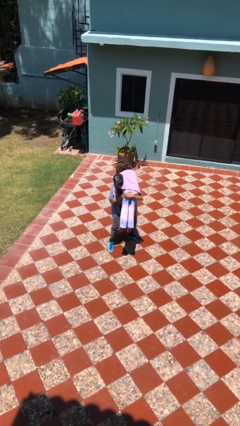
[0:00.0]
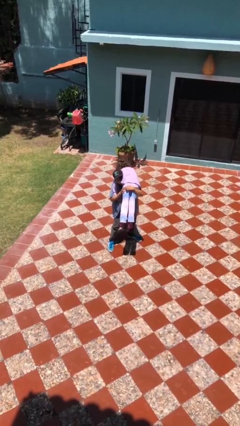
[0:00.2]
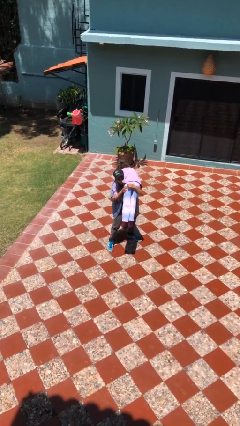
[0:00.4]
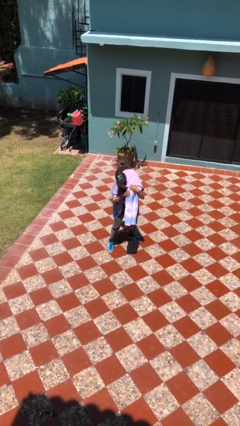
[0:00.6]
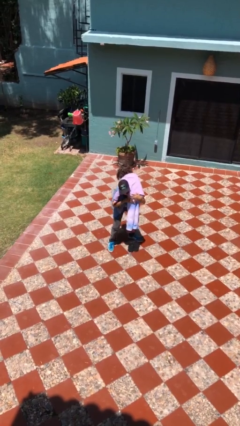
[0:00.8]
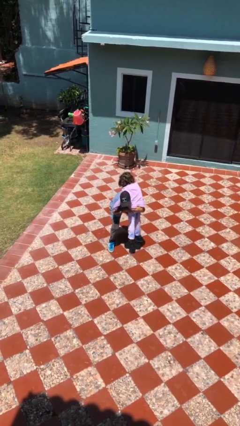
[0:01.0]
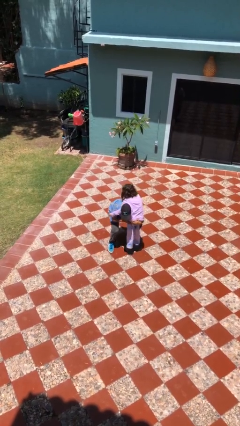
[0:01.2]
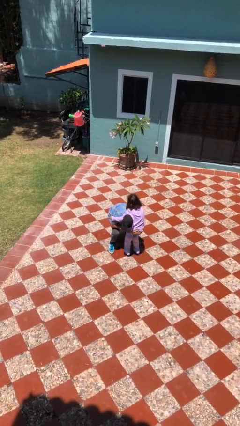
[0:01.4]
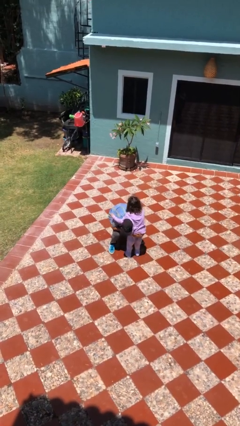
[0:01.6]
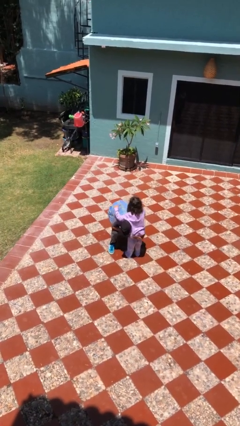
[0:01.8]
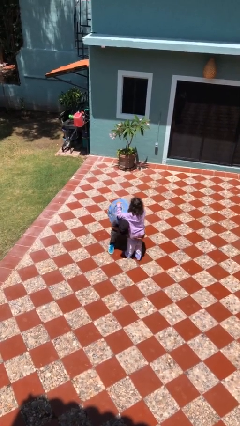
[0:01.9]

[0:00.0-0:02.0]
person puts down person

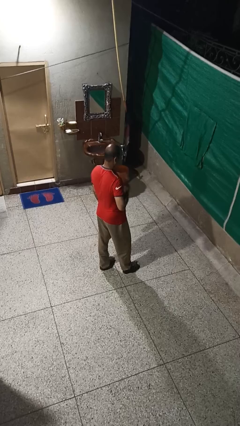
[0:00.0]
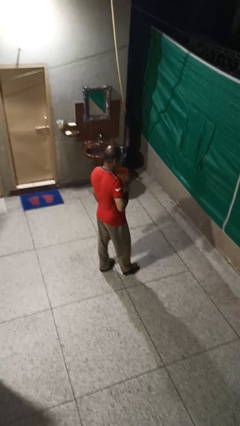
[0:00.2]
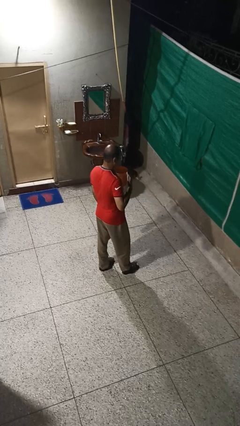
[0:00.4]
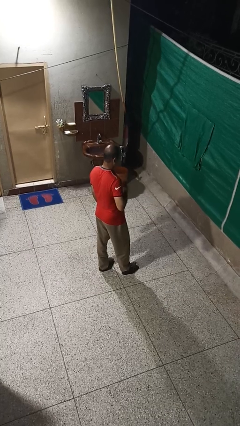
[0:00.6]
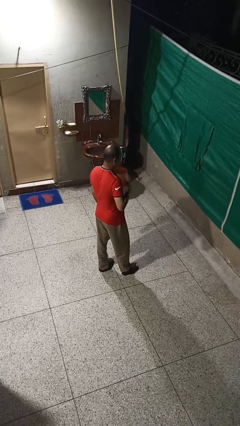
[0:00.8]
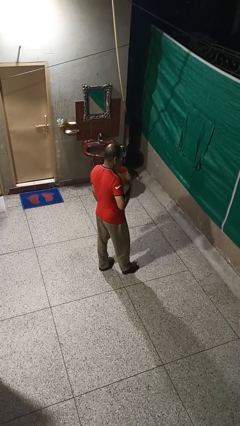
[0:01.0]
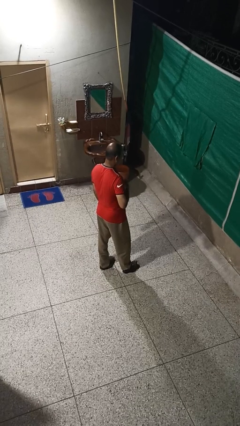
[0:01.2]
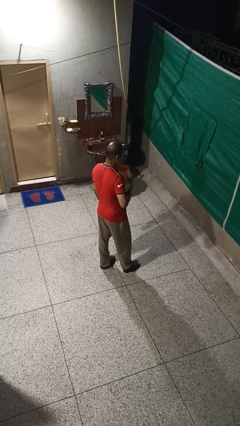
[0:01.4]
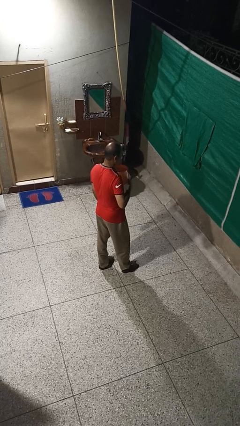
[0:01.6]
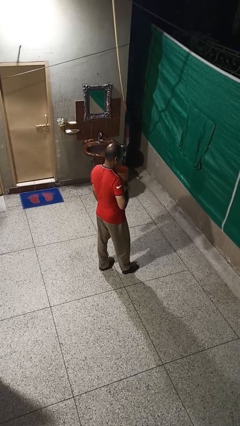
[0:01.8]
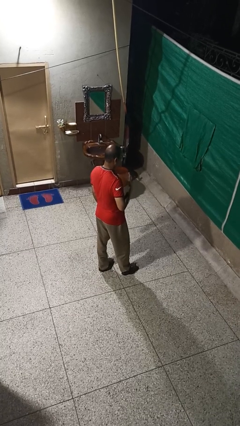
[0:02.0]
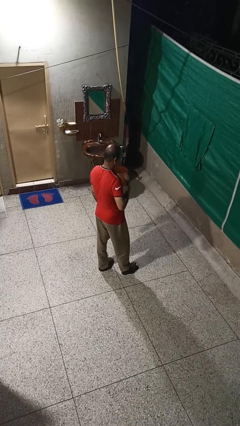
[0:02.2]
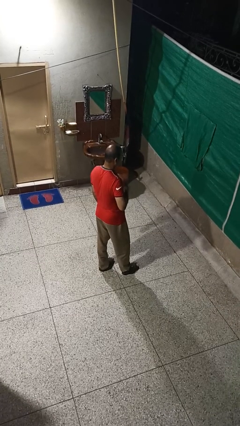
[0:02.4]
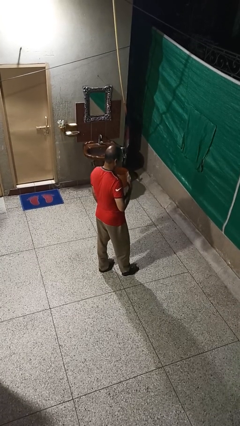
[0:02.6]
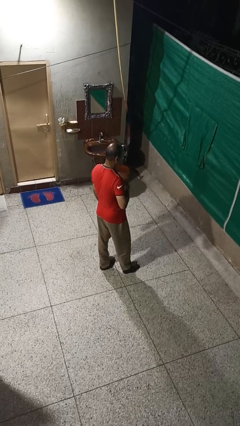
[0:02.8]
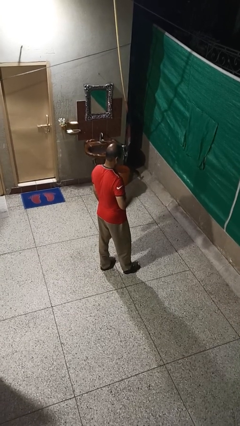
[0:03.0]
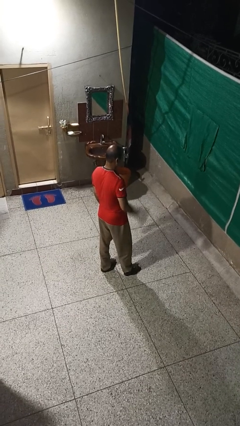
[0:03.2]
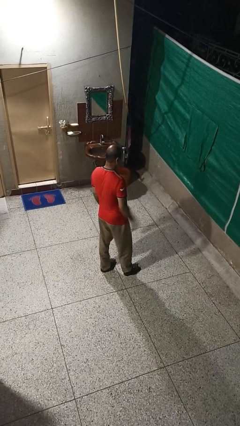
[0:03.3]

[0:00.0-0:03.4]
person drums on chest

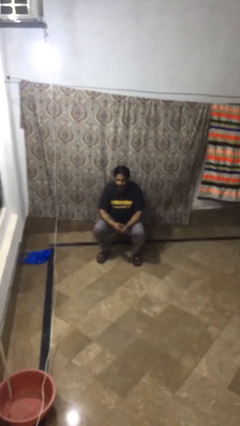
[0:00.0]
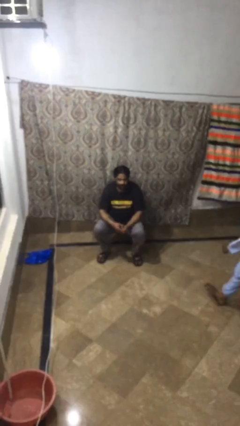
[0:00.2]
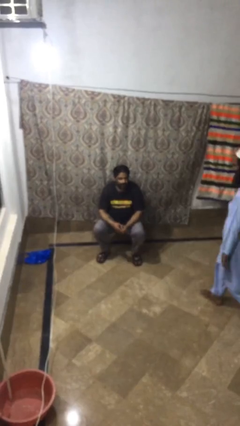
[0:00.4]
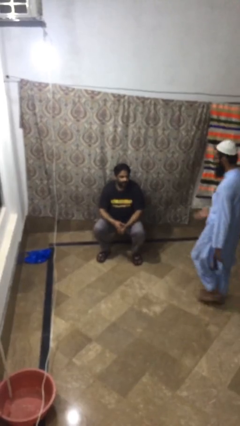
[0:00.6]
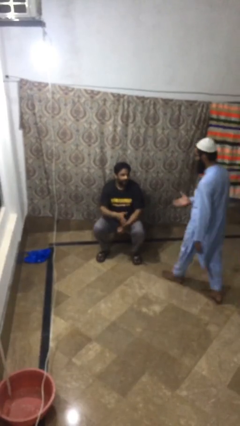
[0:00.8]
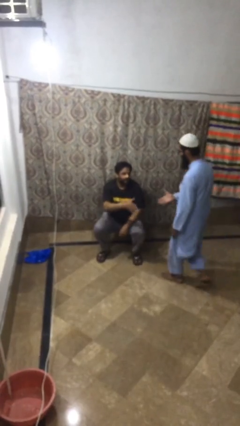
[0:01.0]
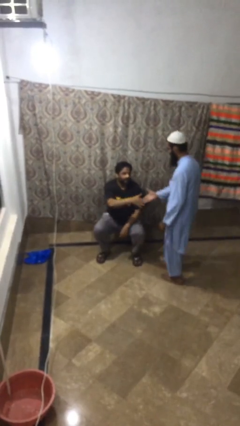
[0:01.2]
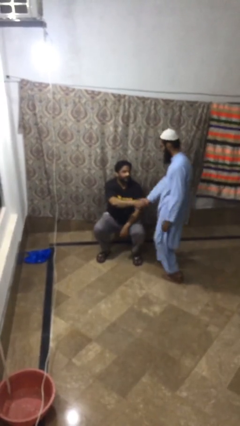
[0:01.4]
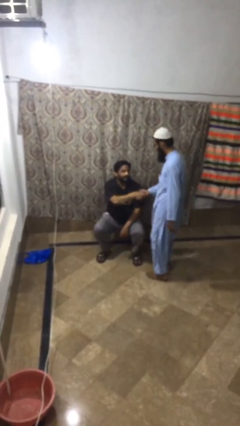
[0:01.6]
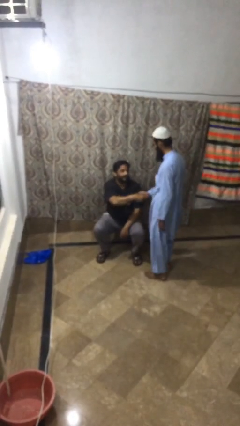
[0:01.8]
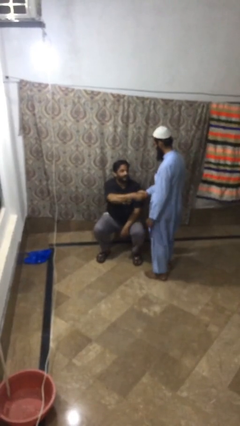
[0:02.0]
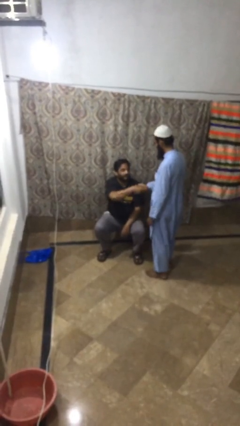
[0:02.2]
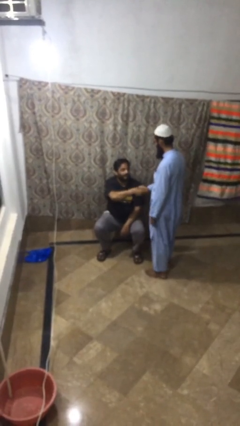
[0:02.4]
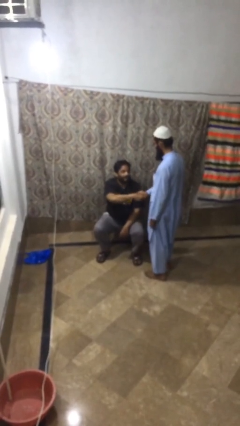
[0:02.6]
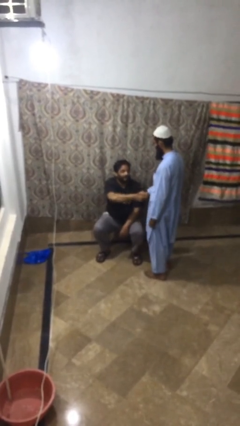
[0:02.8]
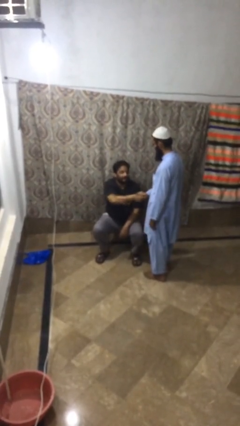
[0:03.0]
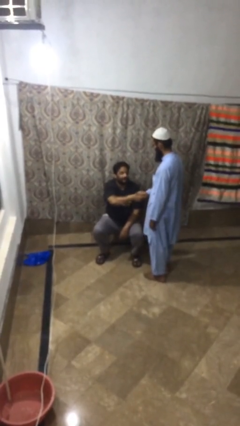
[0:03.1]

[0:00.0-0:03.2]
person shakes hand

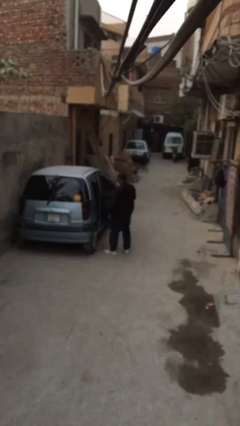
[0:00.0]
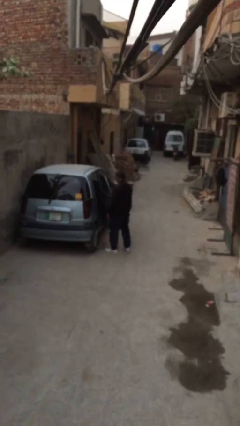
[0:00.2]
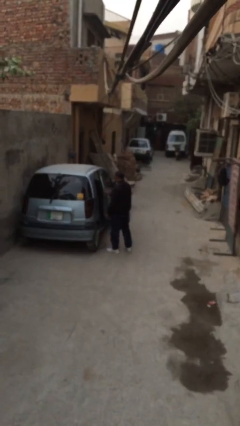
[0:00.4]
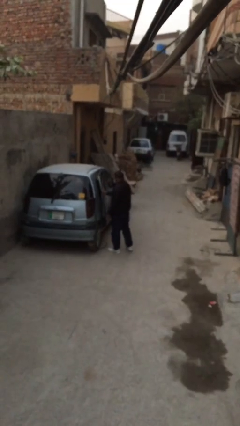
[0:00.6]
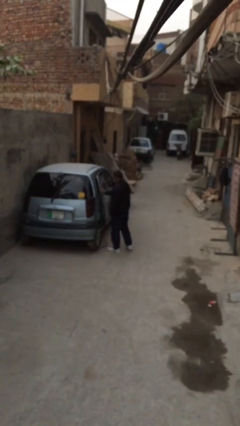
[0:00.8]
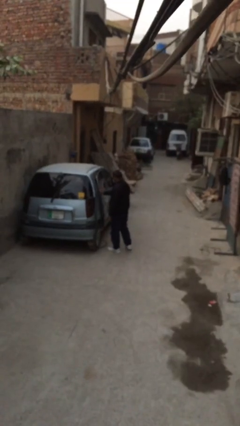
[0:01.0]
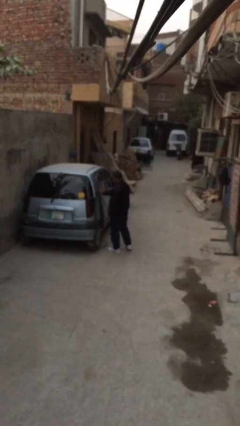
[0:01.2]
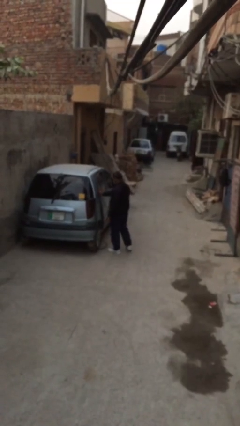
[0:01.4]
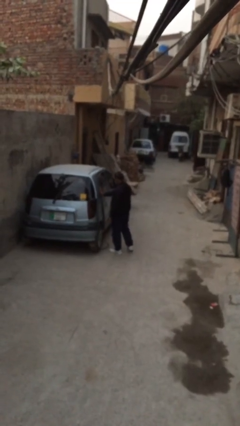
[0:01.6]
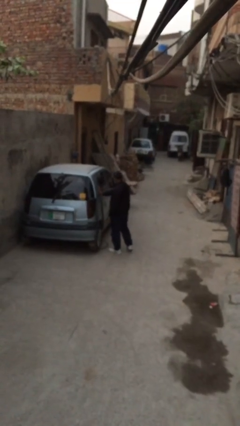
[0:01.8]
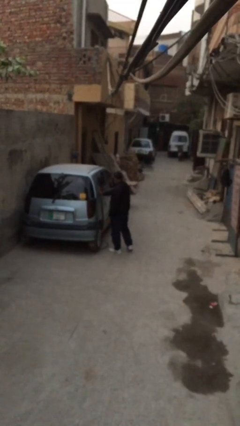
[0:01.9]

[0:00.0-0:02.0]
person closes car door

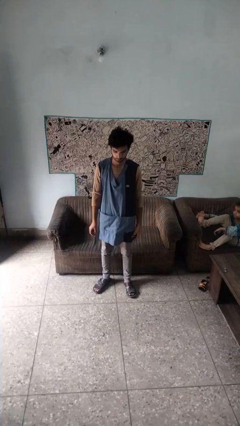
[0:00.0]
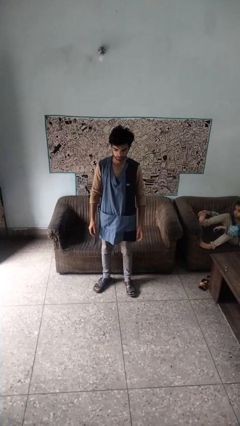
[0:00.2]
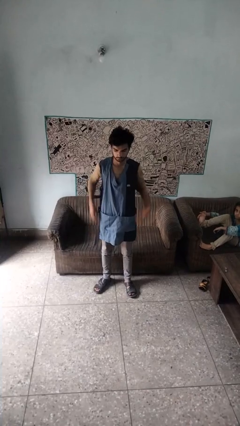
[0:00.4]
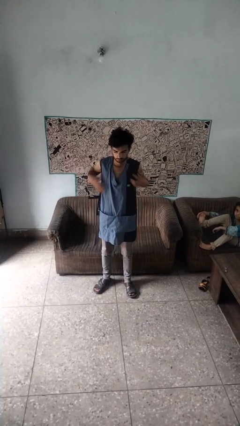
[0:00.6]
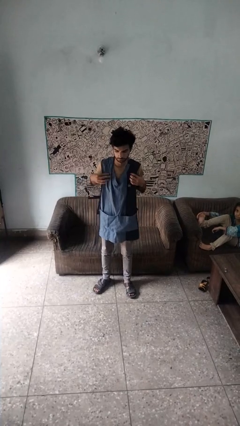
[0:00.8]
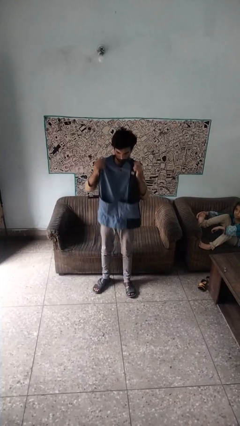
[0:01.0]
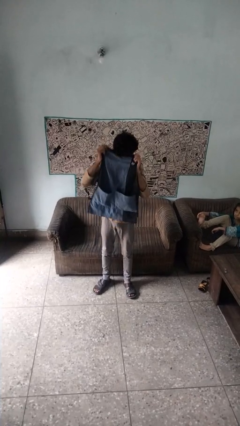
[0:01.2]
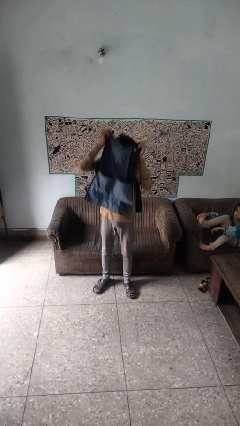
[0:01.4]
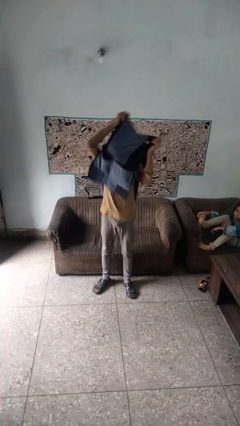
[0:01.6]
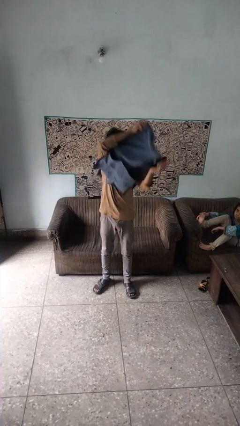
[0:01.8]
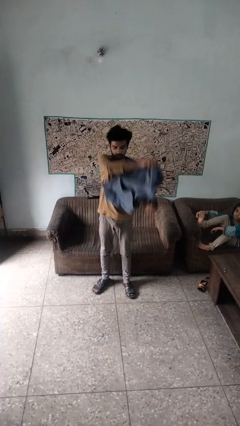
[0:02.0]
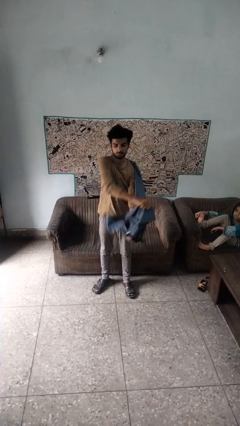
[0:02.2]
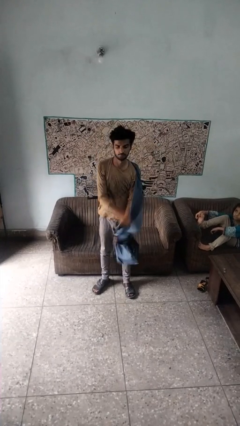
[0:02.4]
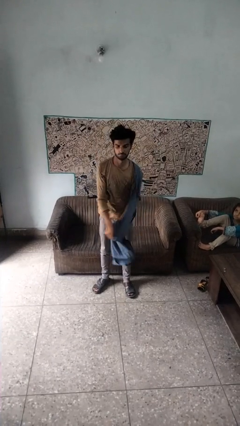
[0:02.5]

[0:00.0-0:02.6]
person takes off apron

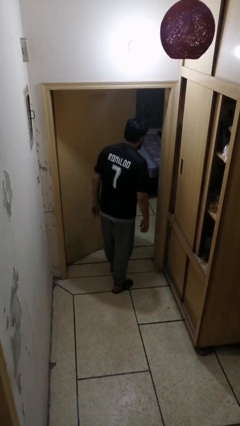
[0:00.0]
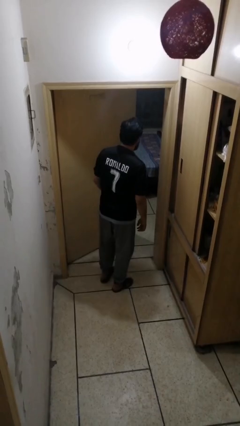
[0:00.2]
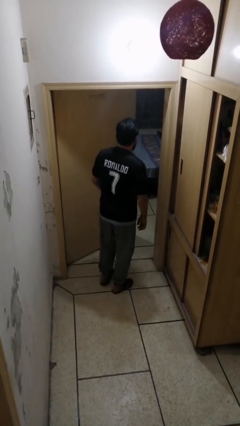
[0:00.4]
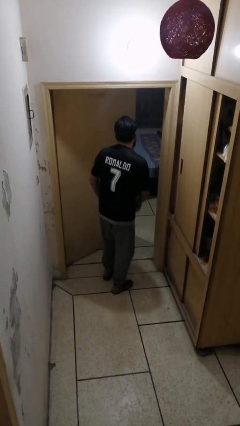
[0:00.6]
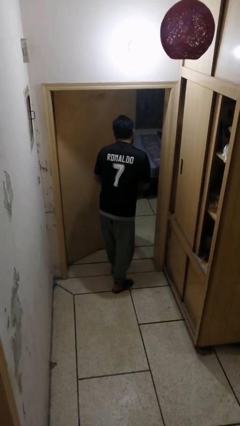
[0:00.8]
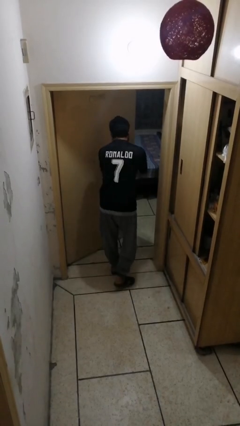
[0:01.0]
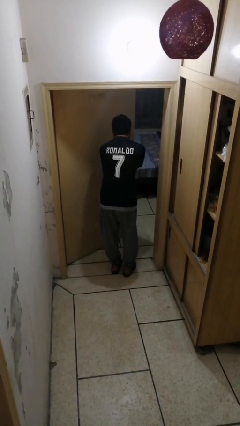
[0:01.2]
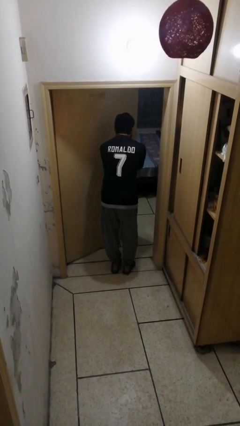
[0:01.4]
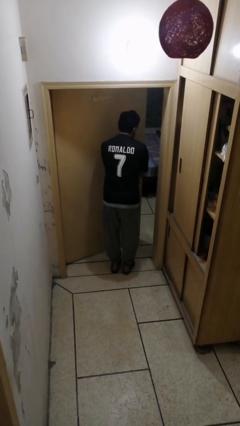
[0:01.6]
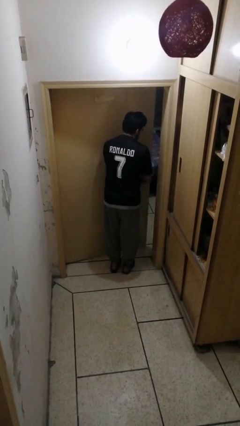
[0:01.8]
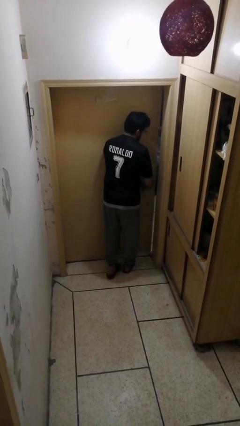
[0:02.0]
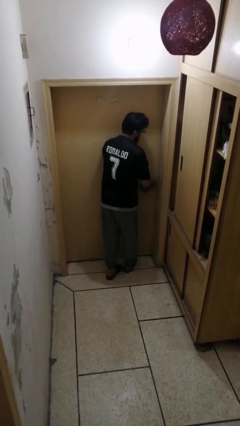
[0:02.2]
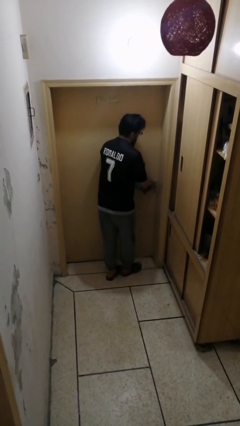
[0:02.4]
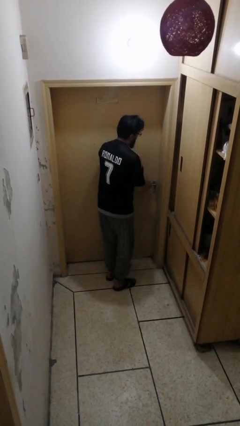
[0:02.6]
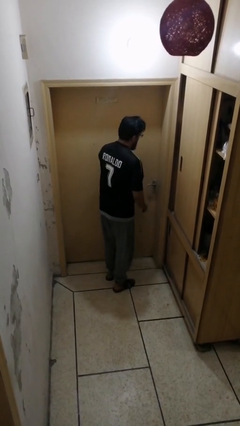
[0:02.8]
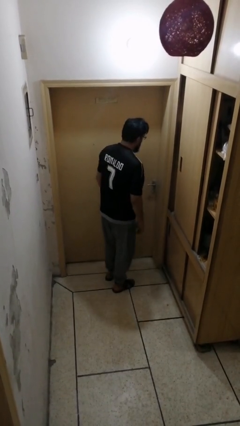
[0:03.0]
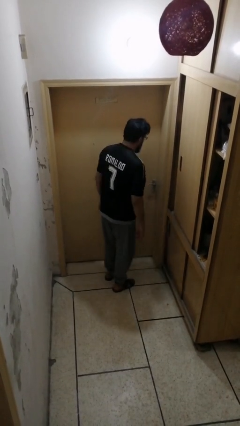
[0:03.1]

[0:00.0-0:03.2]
person closes facility door

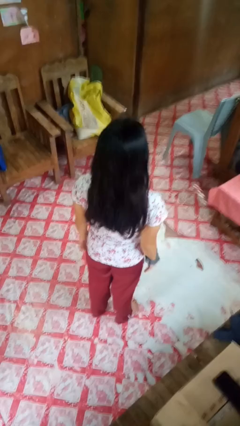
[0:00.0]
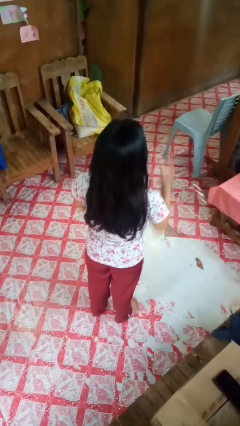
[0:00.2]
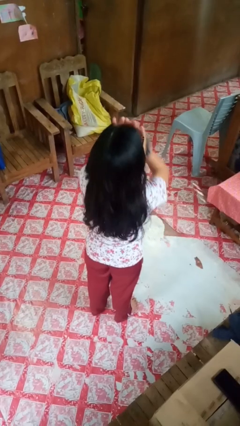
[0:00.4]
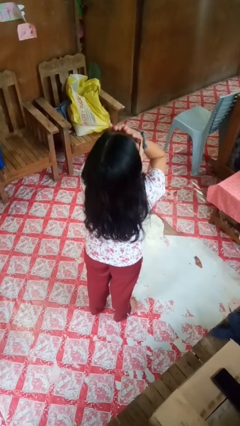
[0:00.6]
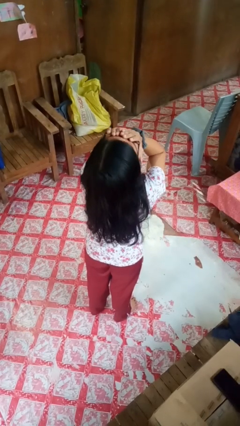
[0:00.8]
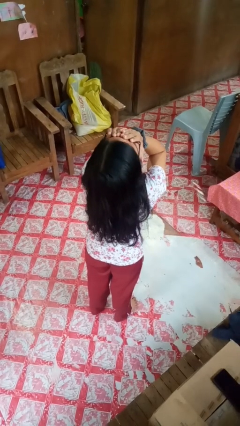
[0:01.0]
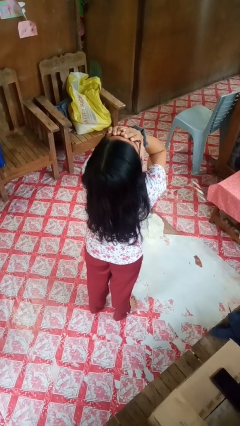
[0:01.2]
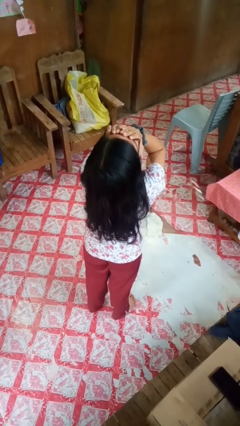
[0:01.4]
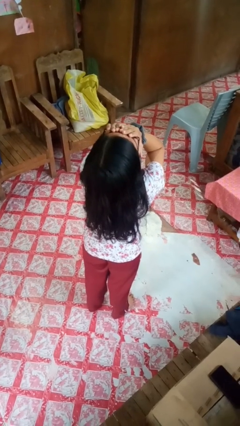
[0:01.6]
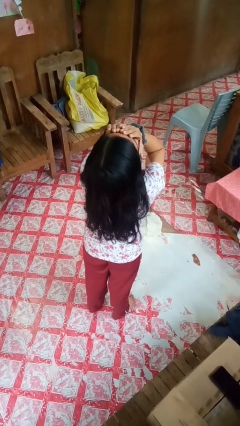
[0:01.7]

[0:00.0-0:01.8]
person covers face with hands
